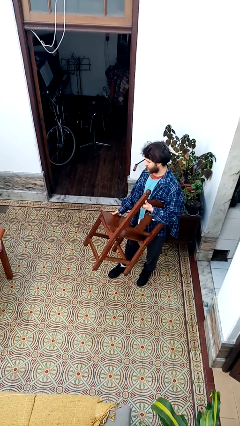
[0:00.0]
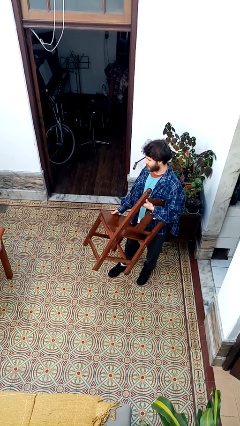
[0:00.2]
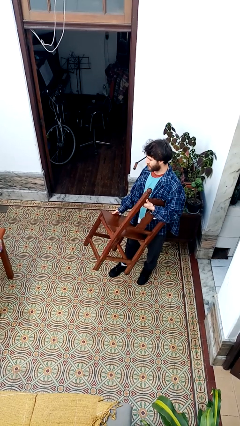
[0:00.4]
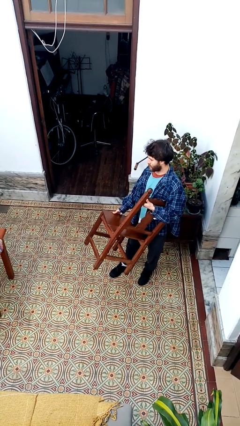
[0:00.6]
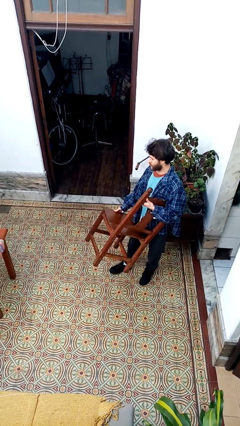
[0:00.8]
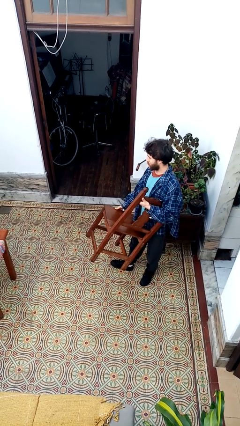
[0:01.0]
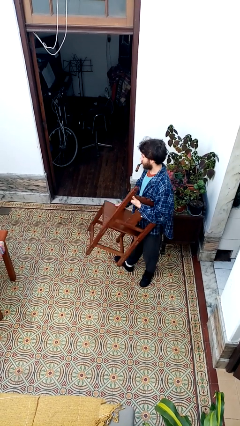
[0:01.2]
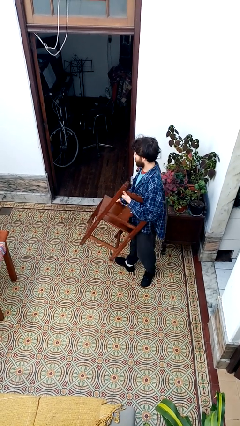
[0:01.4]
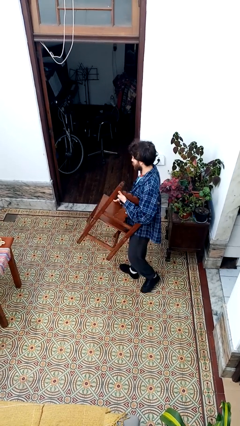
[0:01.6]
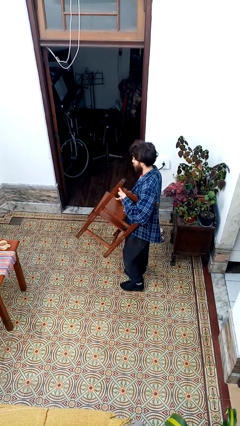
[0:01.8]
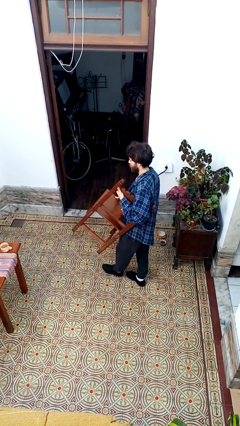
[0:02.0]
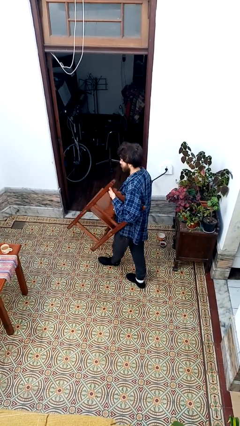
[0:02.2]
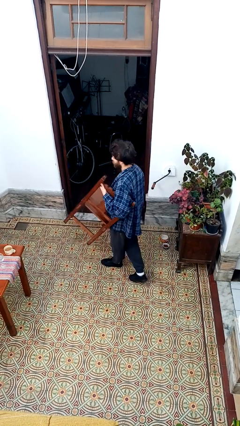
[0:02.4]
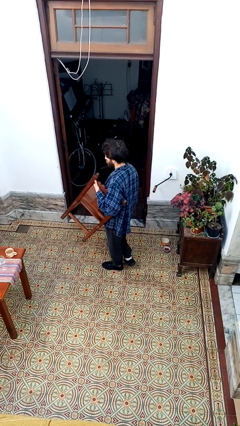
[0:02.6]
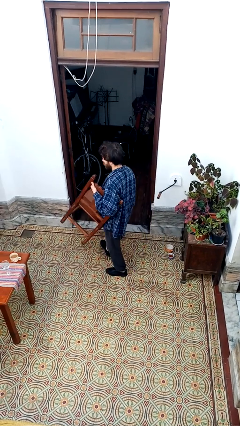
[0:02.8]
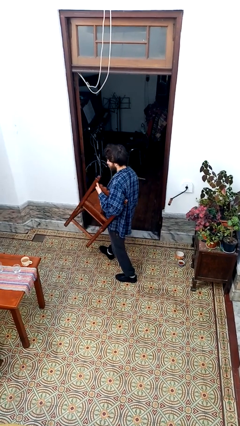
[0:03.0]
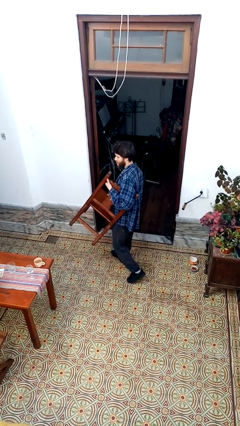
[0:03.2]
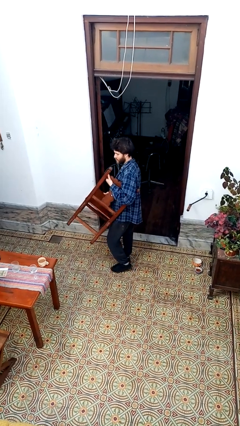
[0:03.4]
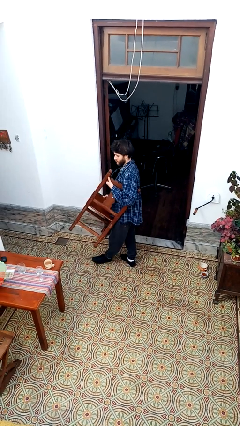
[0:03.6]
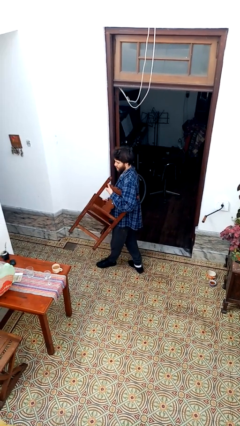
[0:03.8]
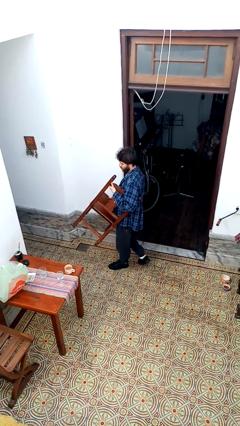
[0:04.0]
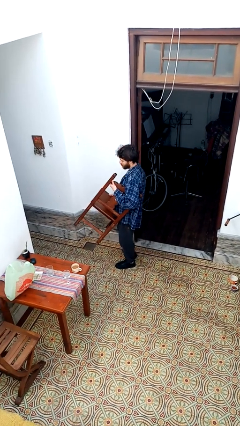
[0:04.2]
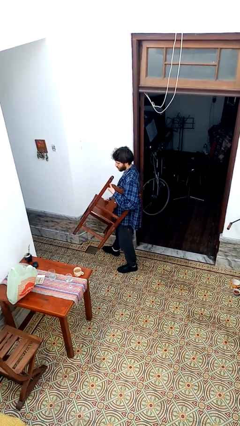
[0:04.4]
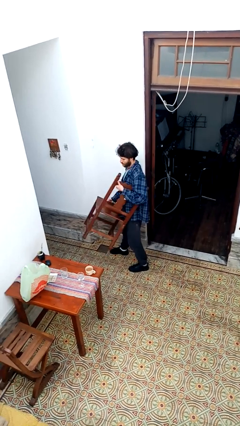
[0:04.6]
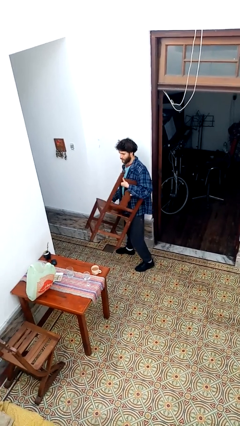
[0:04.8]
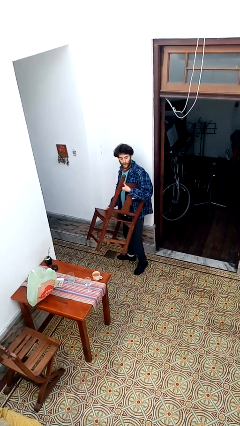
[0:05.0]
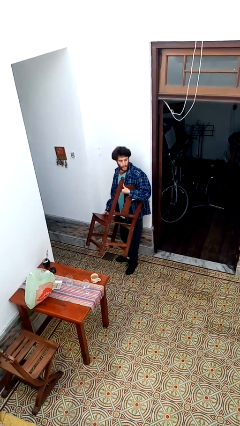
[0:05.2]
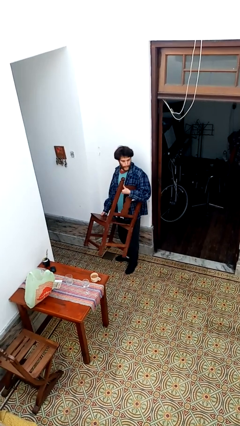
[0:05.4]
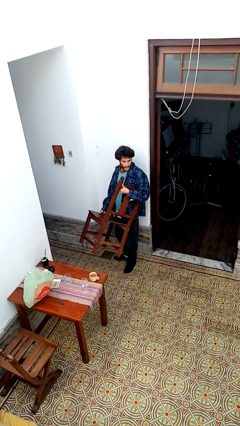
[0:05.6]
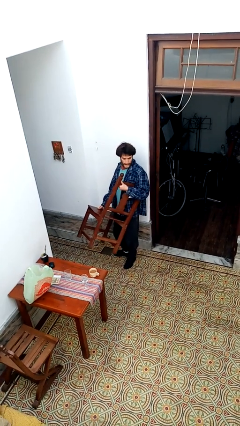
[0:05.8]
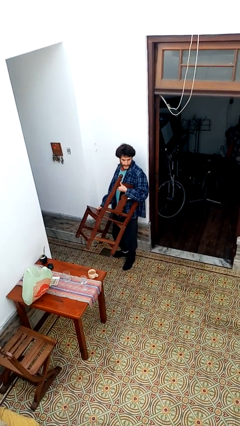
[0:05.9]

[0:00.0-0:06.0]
person carries furniture

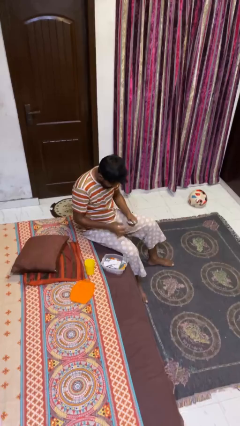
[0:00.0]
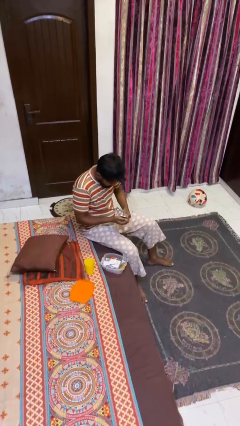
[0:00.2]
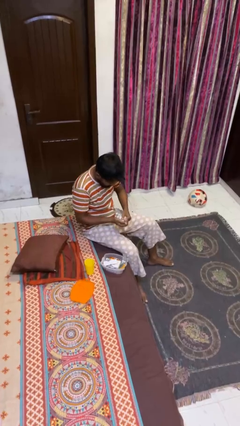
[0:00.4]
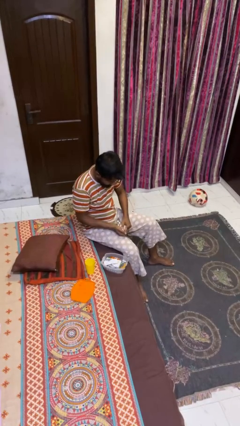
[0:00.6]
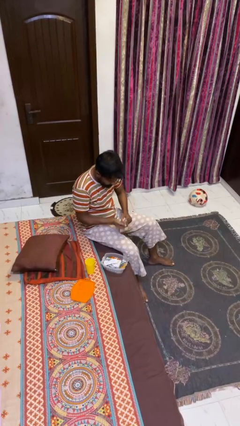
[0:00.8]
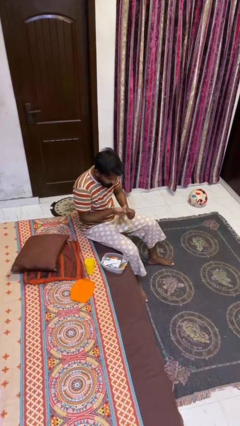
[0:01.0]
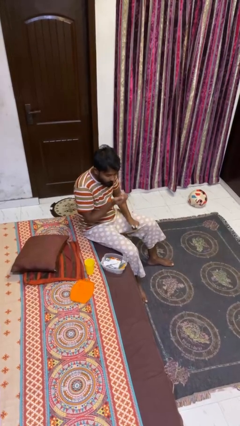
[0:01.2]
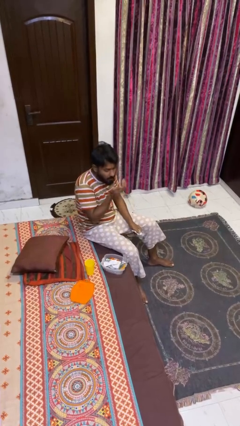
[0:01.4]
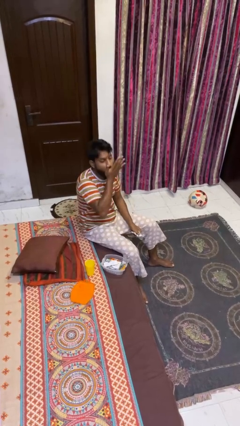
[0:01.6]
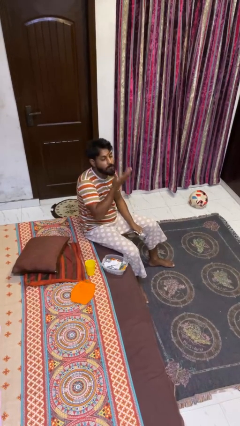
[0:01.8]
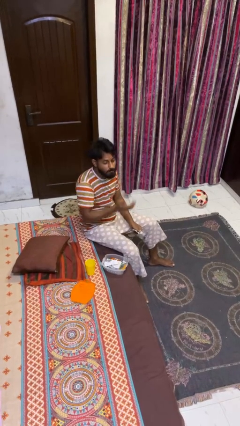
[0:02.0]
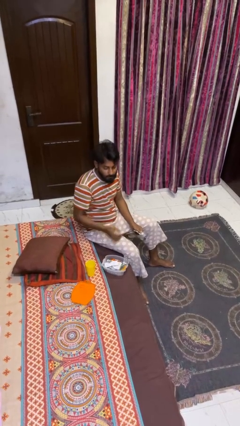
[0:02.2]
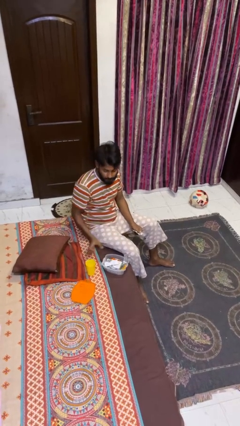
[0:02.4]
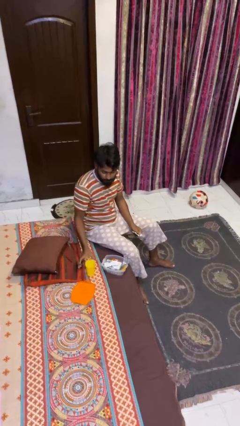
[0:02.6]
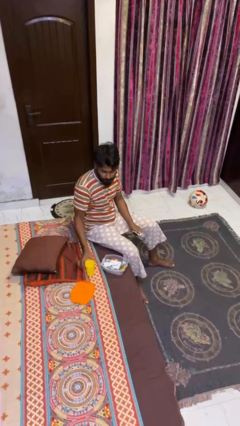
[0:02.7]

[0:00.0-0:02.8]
person takes medicine pills

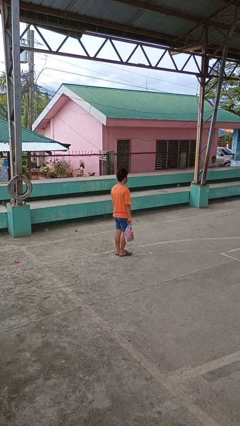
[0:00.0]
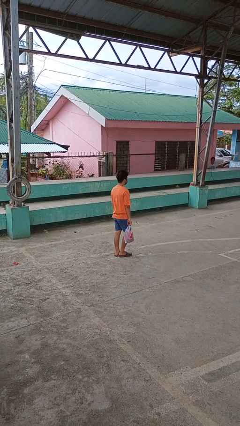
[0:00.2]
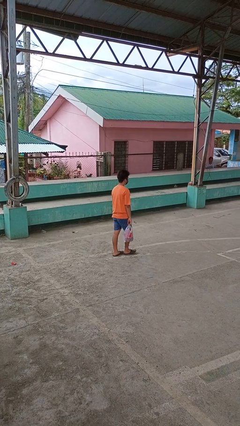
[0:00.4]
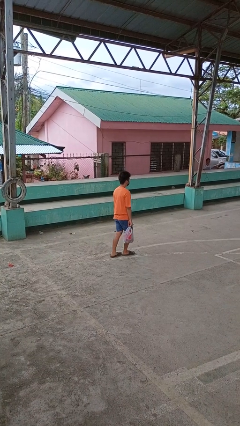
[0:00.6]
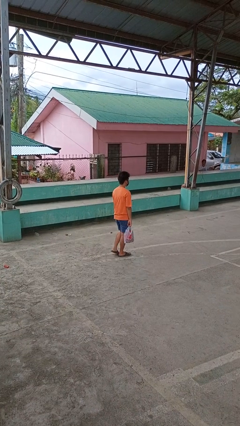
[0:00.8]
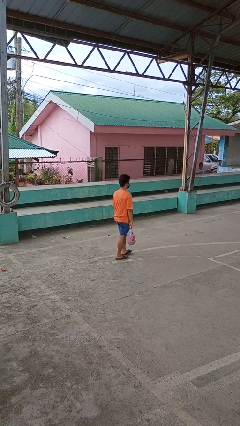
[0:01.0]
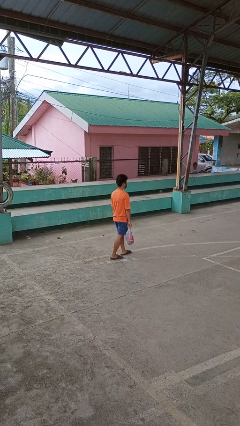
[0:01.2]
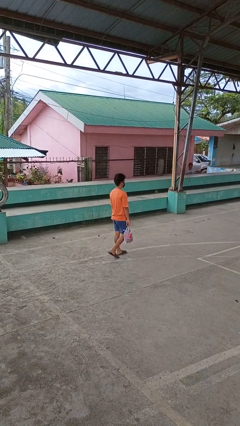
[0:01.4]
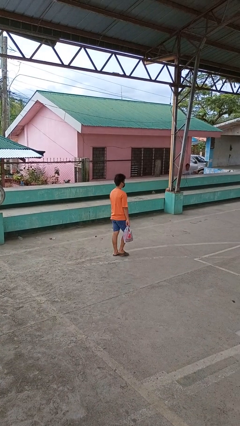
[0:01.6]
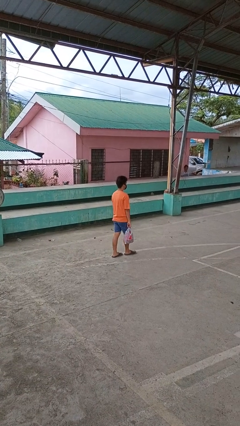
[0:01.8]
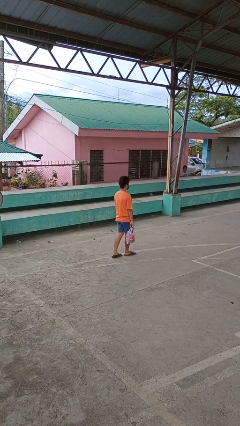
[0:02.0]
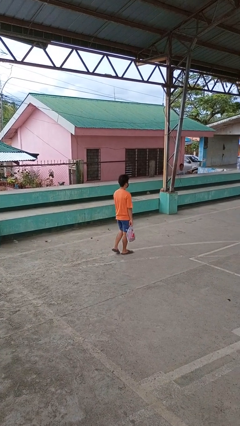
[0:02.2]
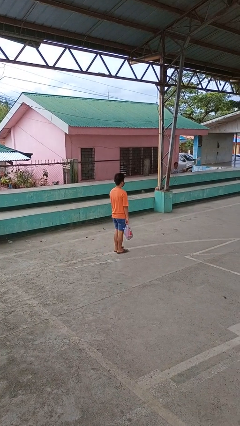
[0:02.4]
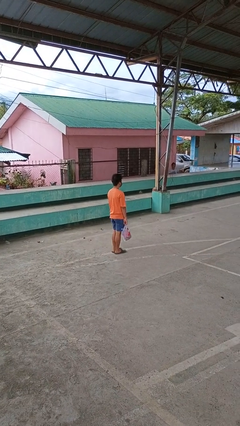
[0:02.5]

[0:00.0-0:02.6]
person carries groceries

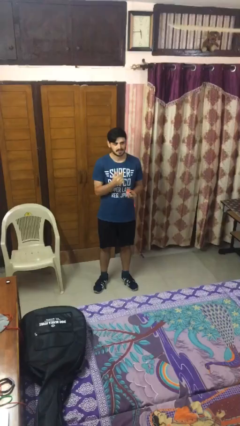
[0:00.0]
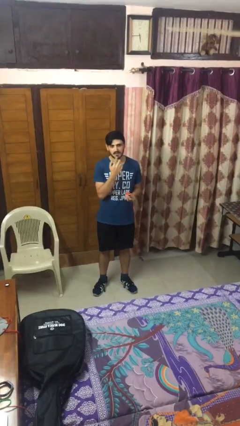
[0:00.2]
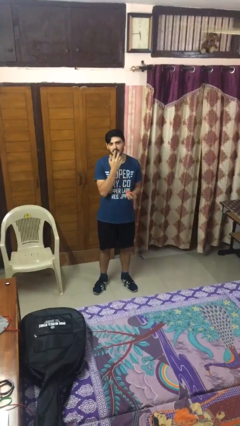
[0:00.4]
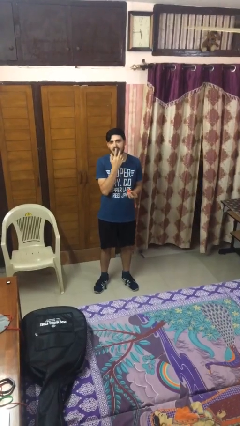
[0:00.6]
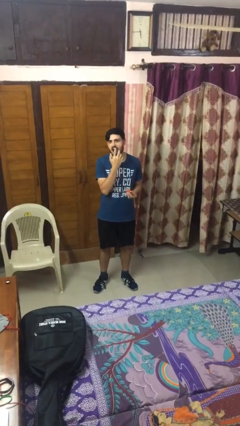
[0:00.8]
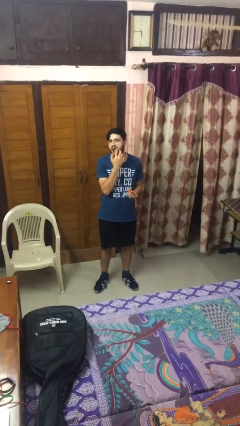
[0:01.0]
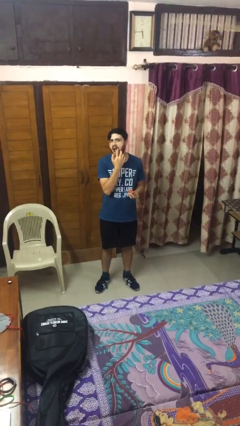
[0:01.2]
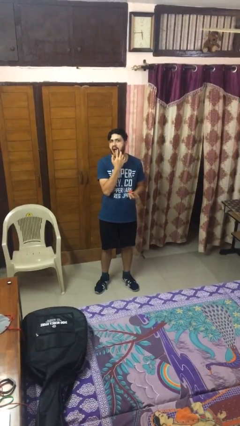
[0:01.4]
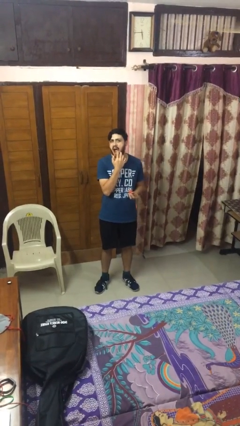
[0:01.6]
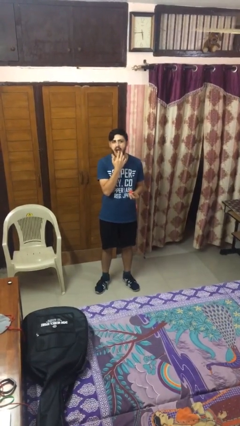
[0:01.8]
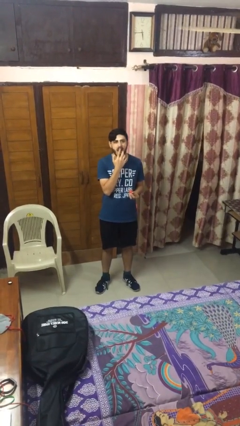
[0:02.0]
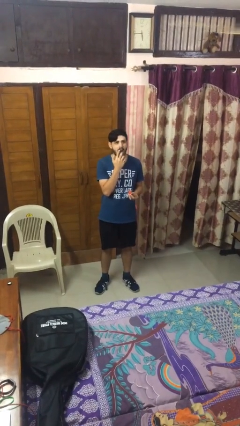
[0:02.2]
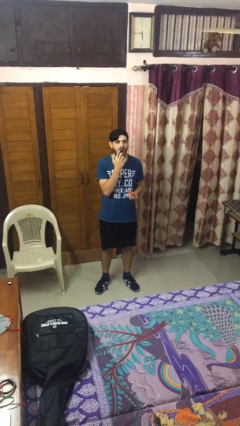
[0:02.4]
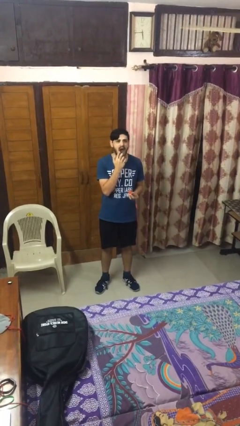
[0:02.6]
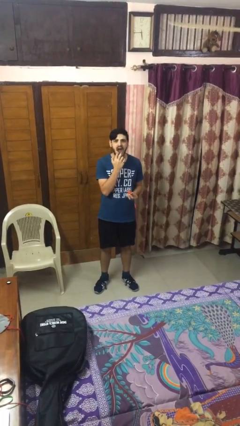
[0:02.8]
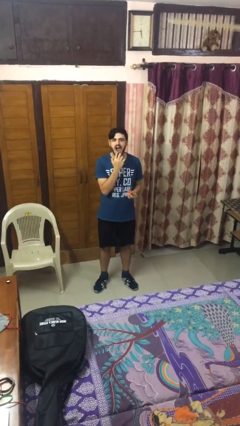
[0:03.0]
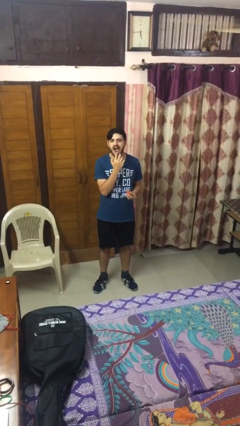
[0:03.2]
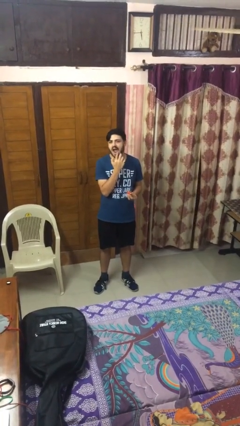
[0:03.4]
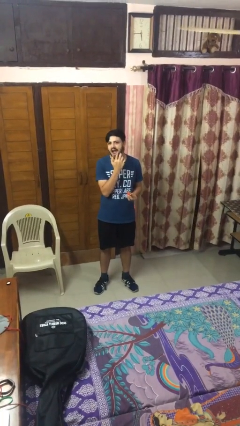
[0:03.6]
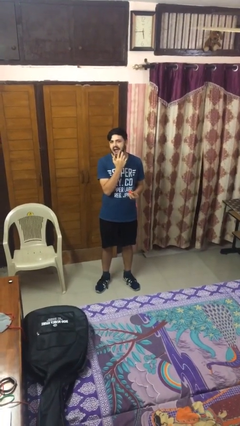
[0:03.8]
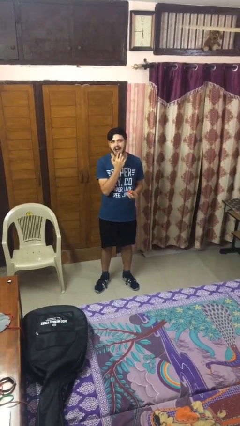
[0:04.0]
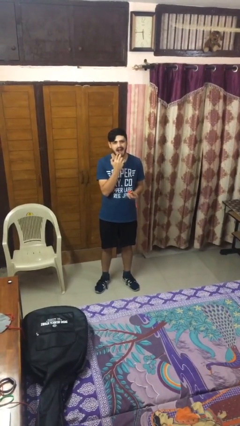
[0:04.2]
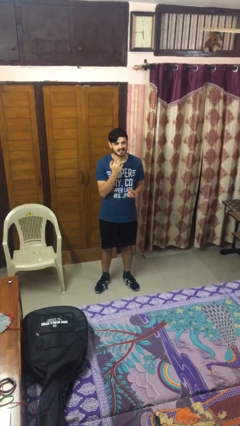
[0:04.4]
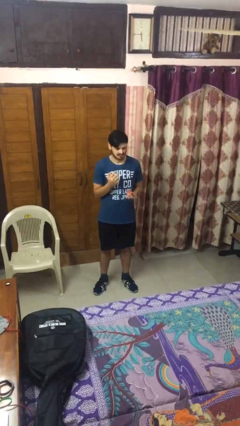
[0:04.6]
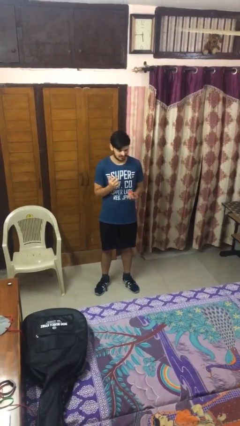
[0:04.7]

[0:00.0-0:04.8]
person applies lip makeup

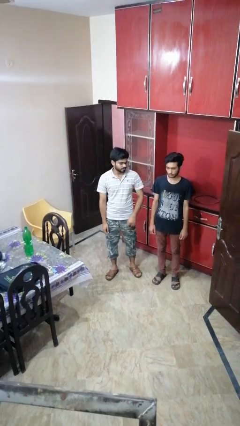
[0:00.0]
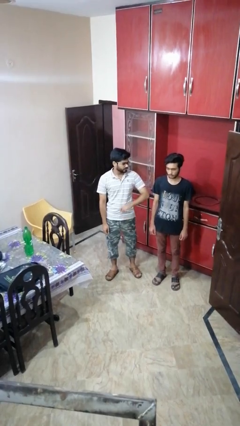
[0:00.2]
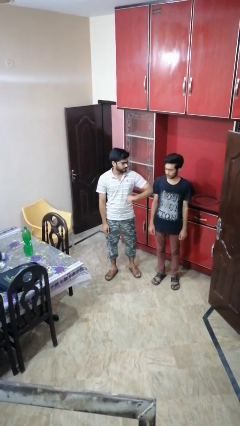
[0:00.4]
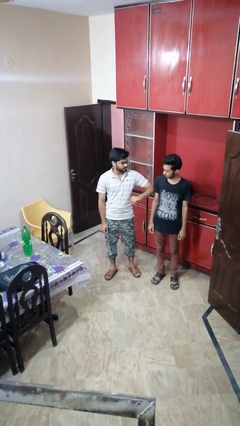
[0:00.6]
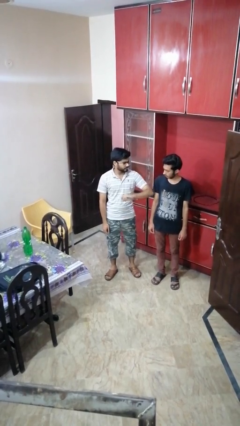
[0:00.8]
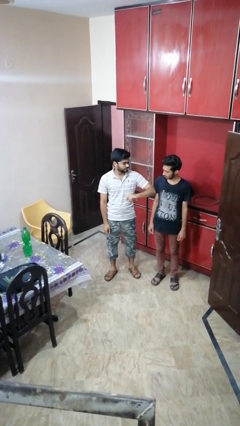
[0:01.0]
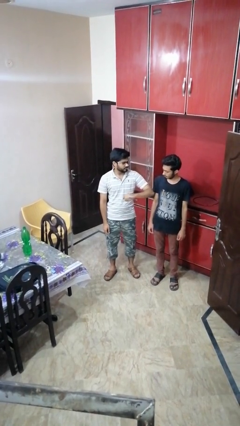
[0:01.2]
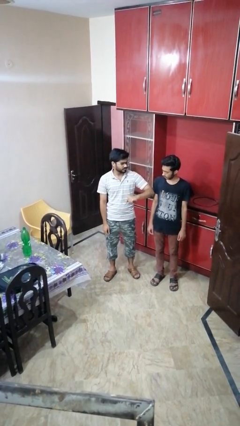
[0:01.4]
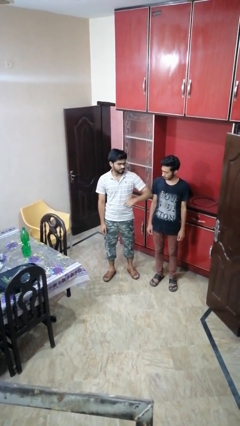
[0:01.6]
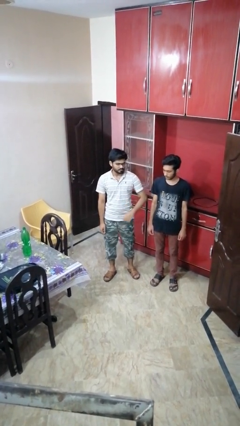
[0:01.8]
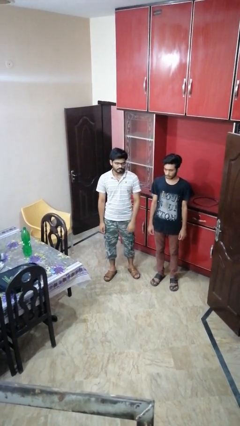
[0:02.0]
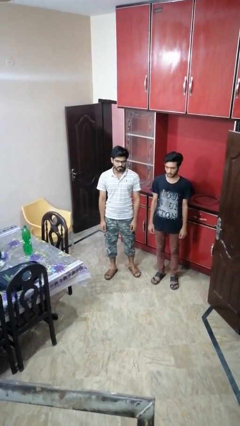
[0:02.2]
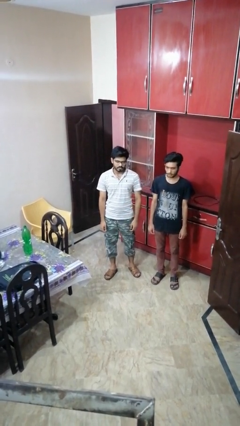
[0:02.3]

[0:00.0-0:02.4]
person nudges person with elbow
